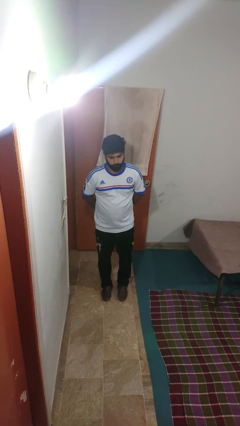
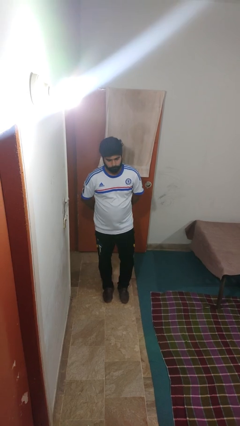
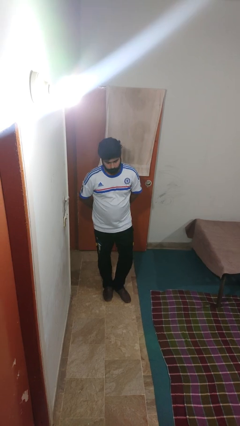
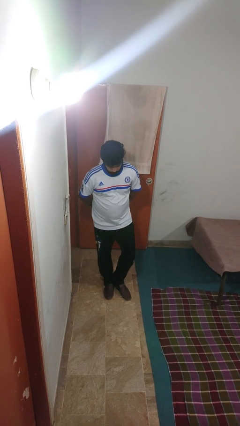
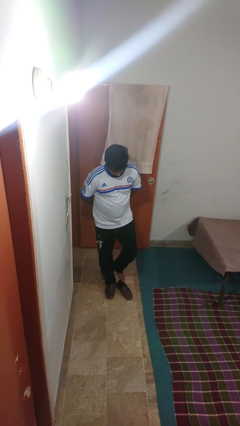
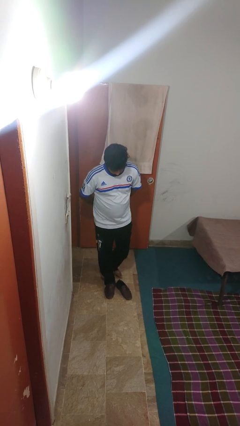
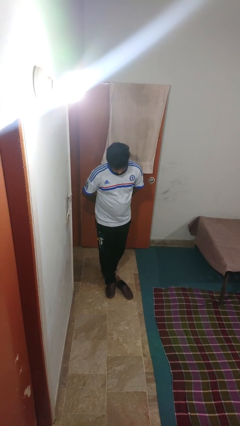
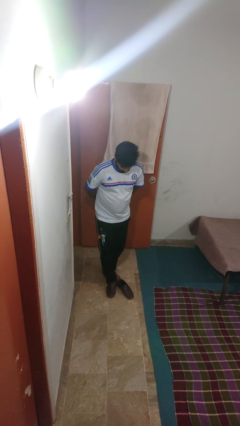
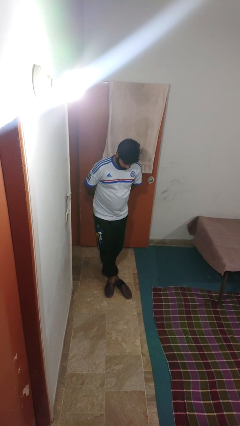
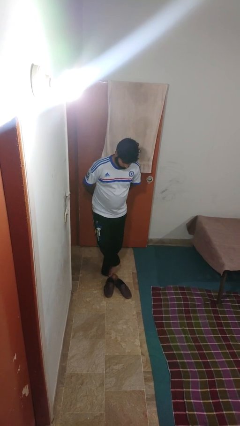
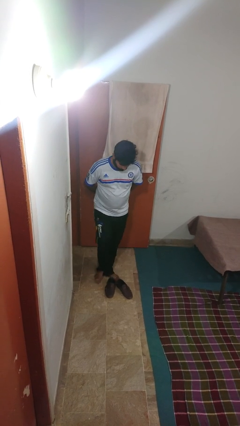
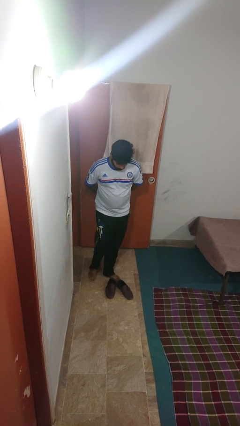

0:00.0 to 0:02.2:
person takes off shoes

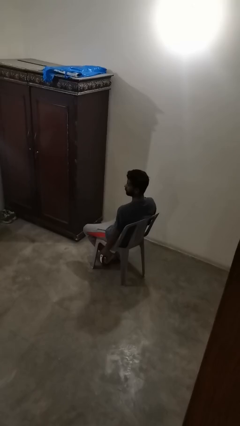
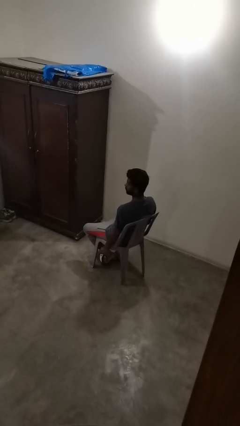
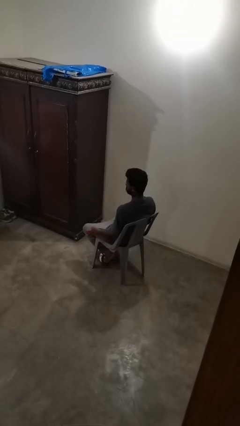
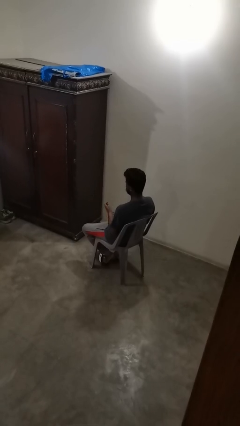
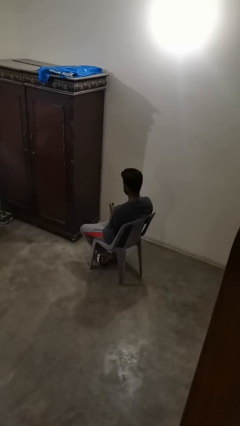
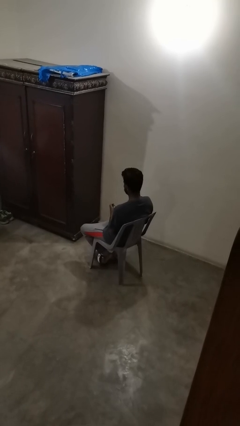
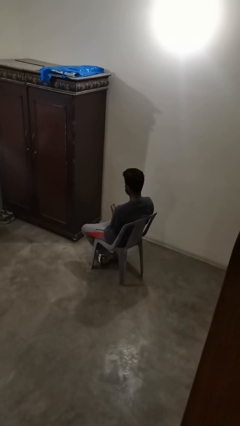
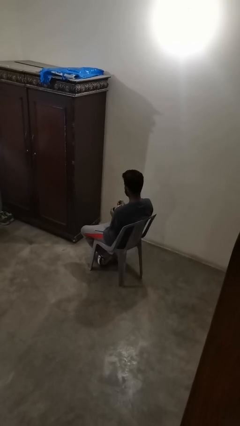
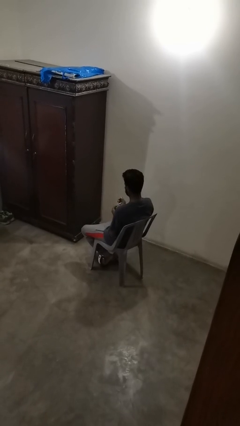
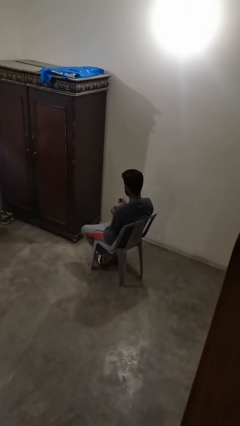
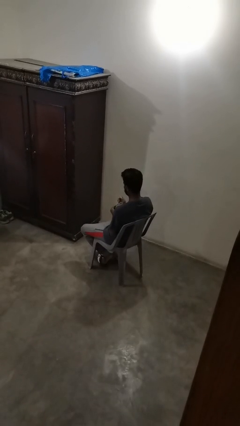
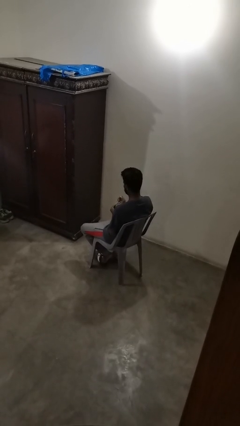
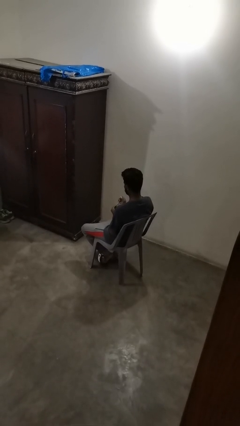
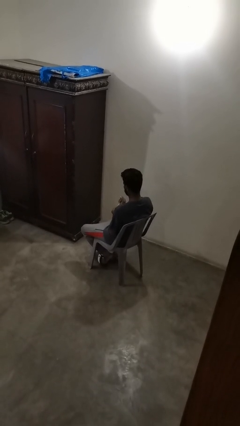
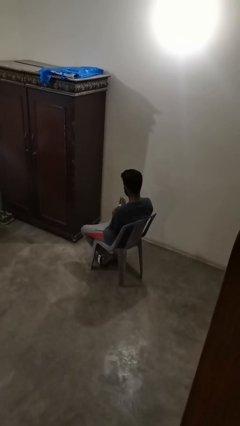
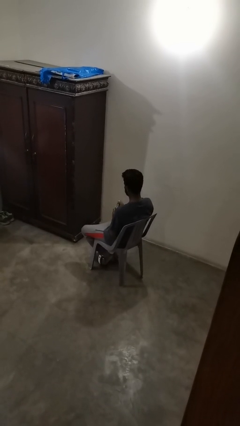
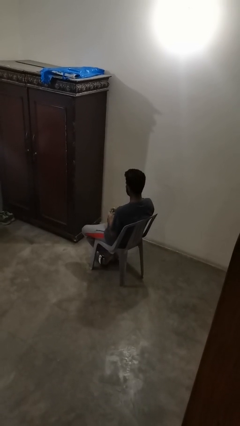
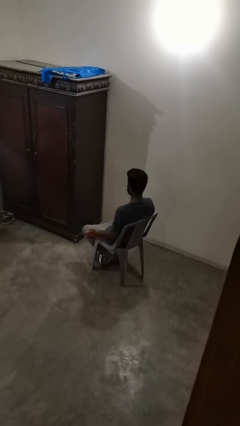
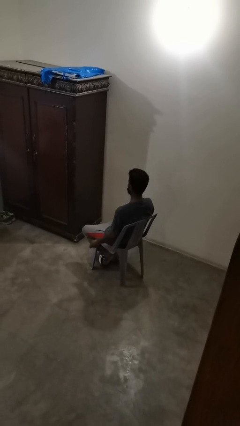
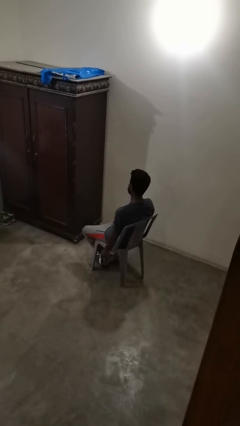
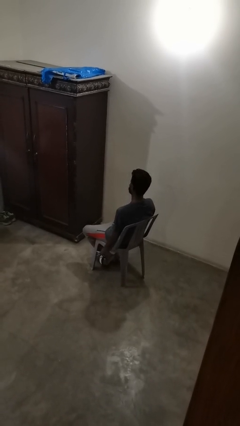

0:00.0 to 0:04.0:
person clips fingernails

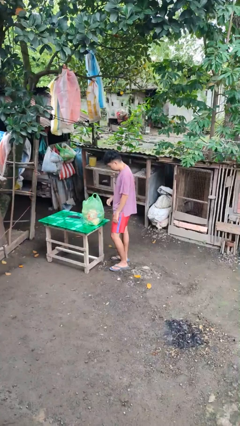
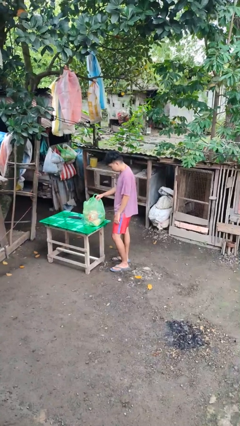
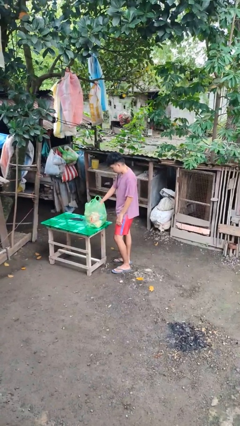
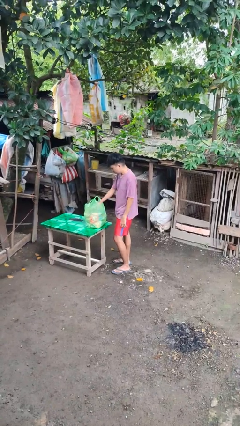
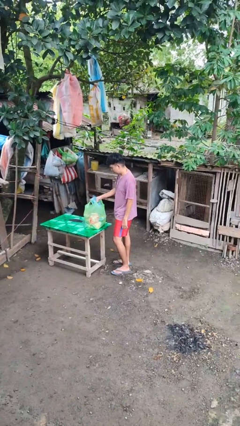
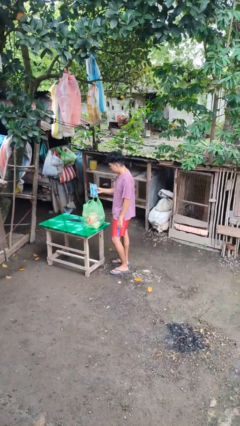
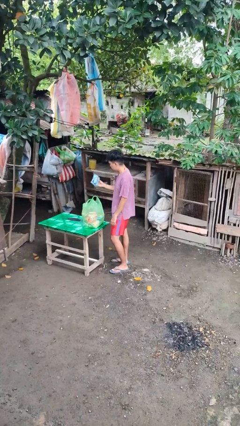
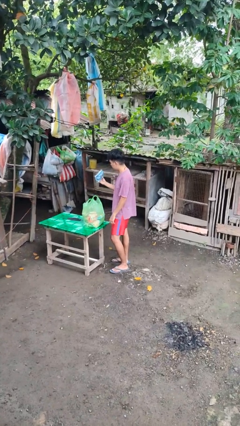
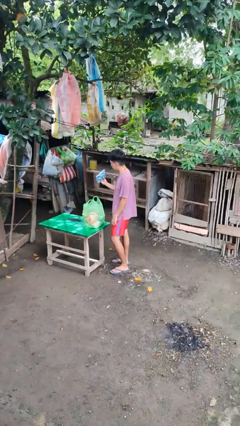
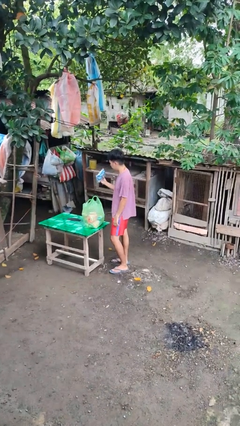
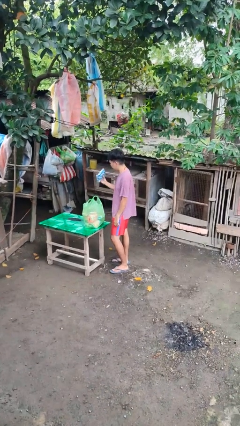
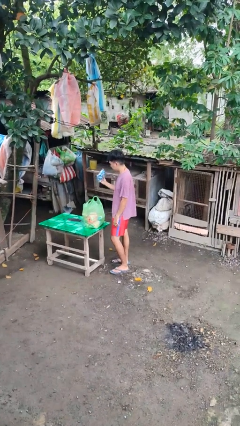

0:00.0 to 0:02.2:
person takes object from bag

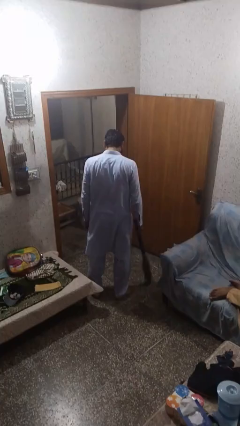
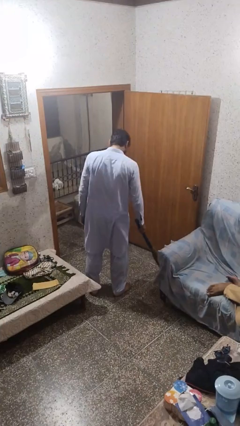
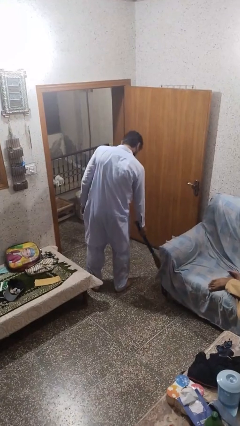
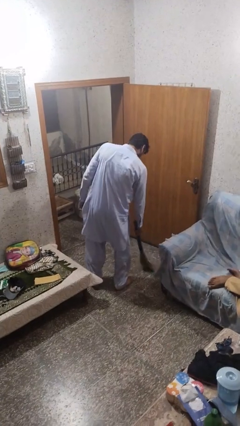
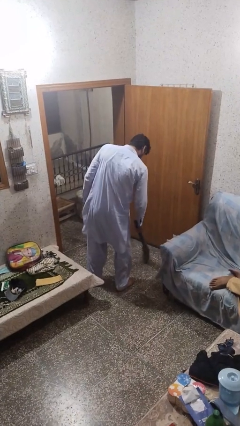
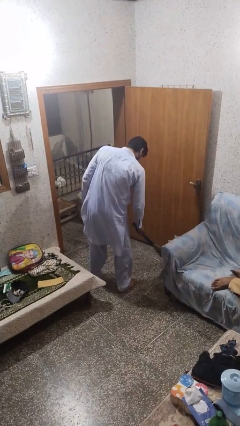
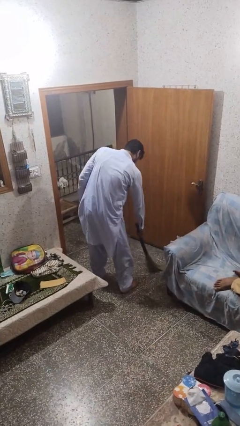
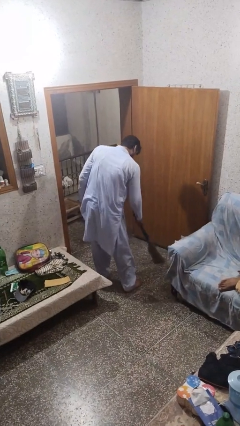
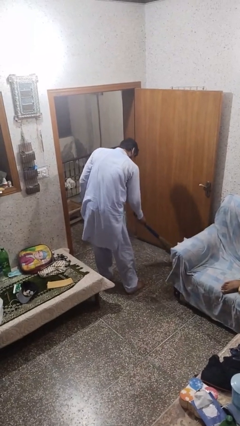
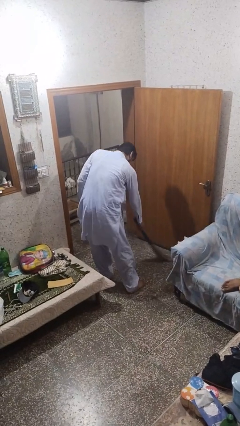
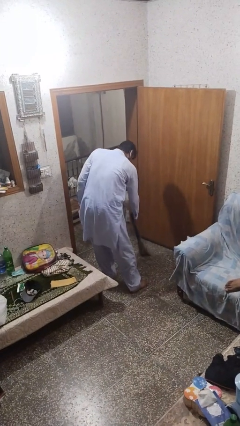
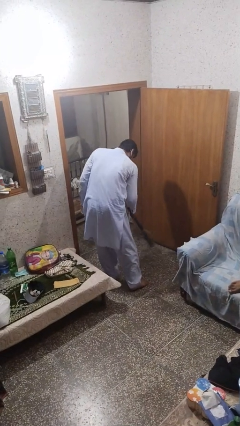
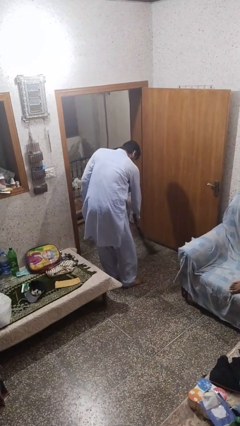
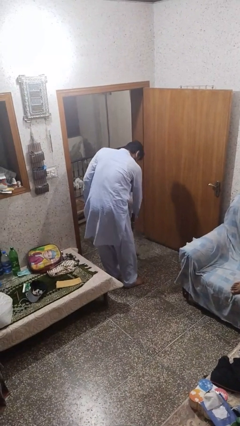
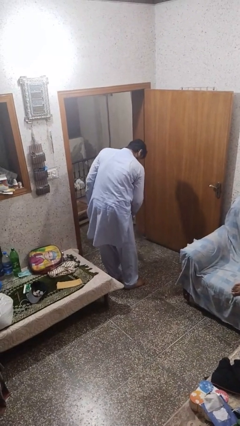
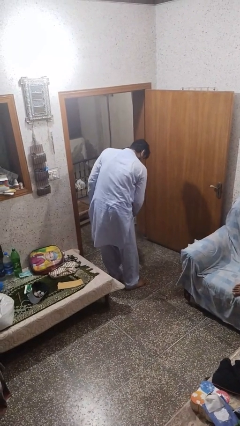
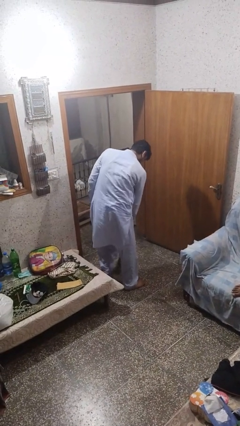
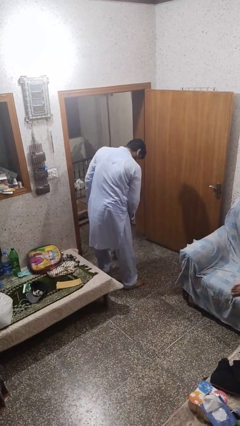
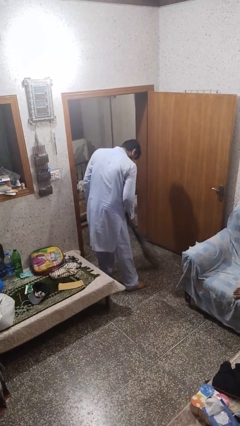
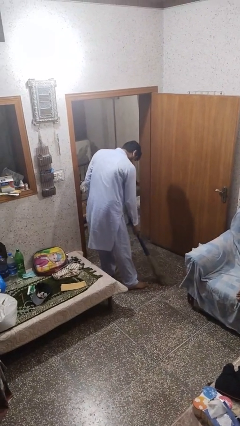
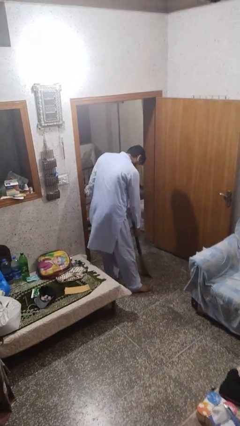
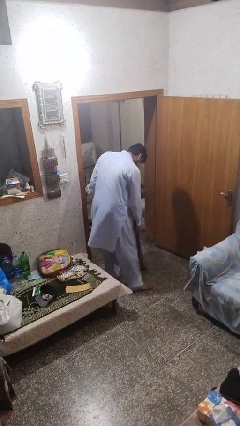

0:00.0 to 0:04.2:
person sweeps floor

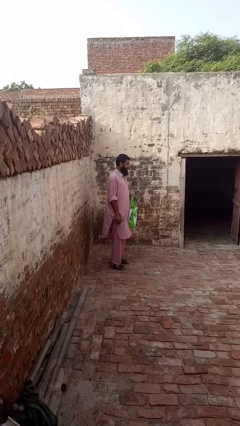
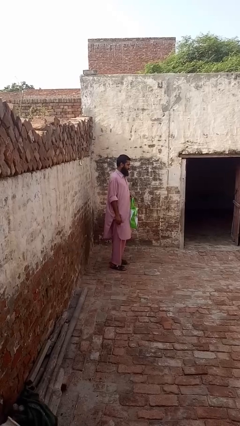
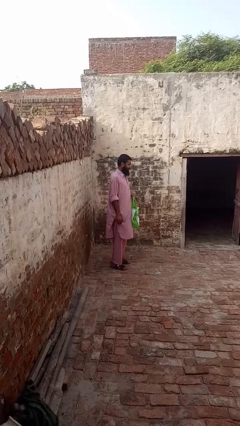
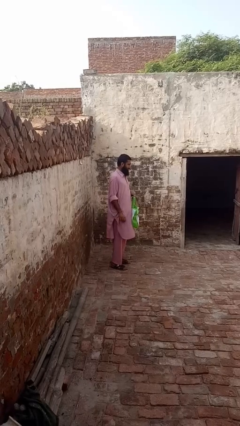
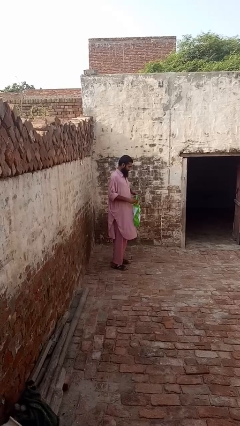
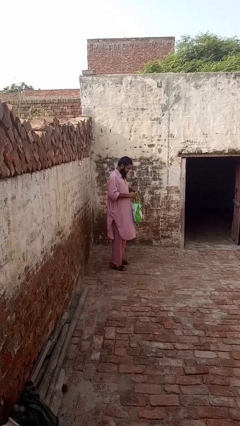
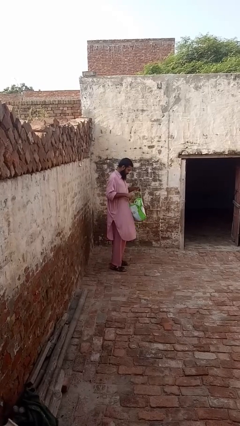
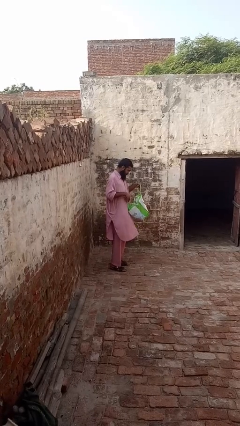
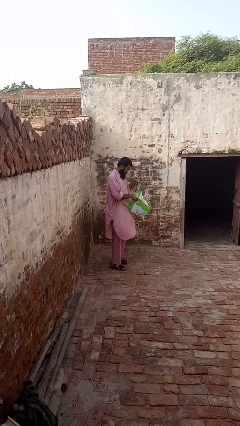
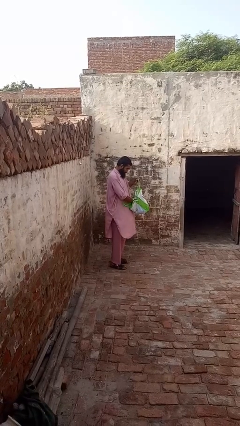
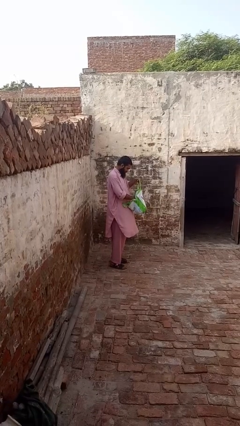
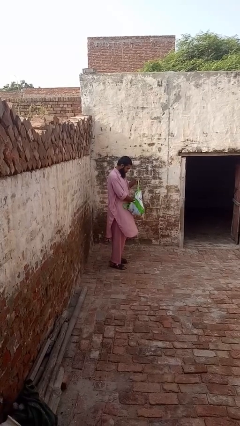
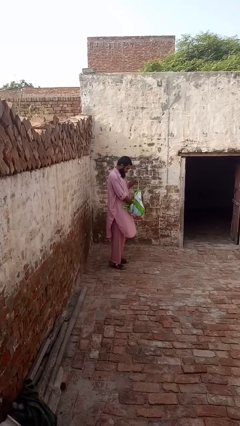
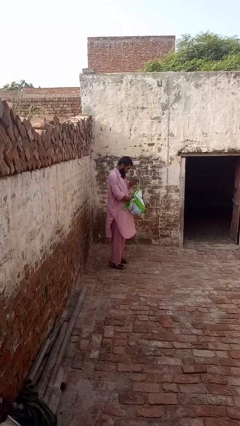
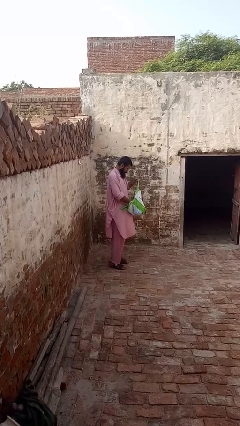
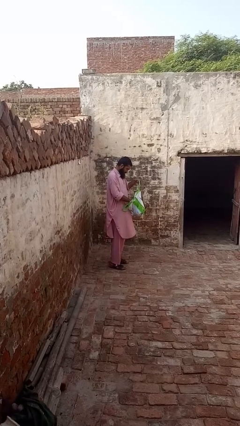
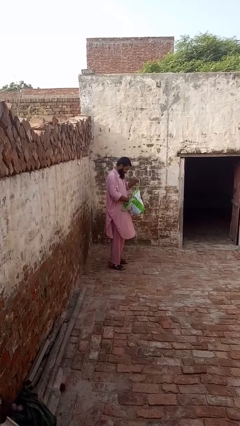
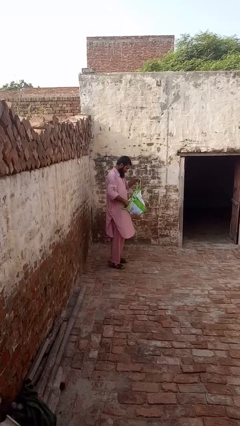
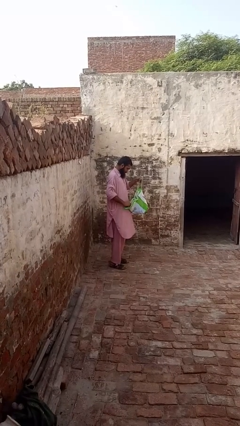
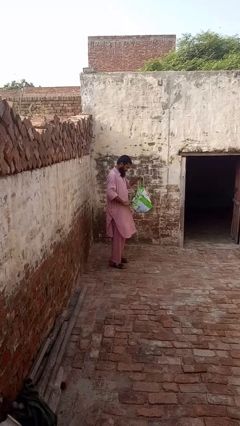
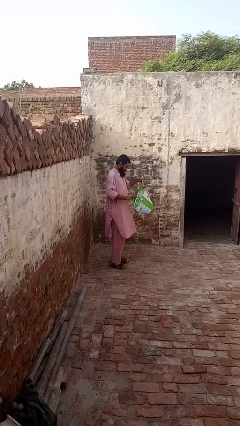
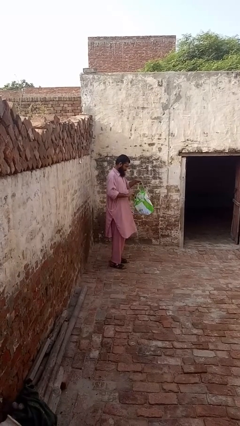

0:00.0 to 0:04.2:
person searches in bag

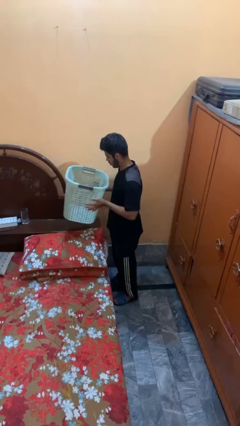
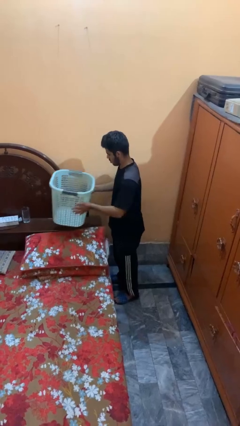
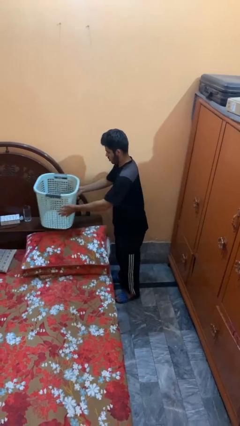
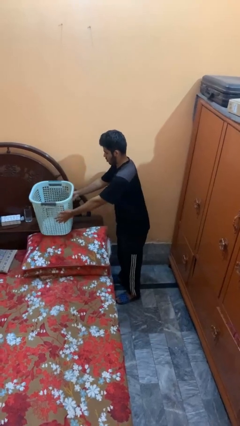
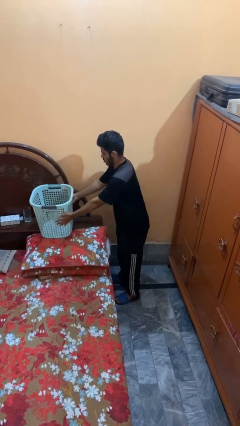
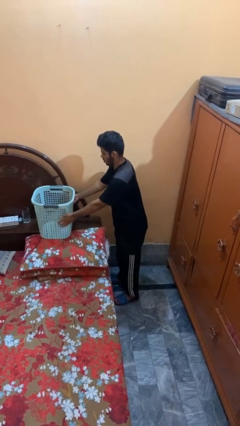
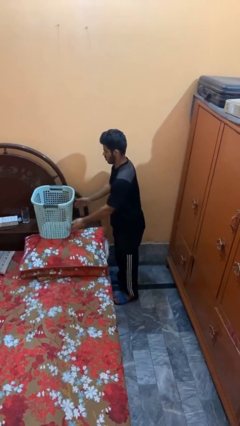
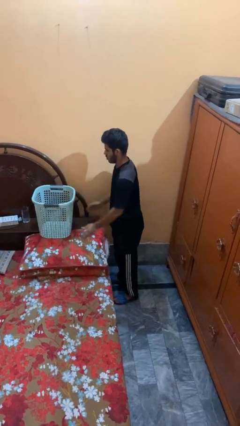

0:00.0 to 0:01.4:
person puts down object on bed
